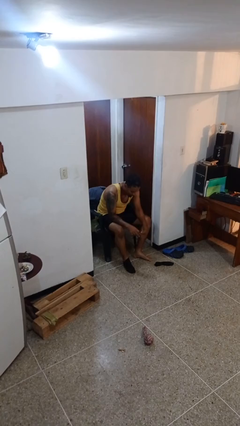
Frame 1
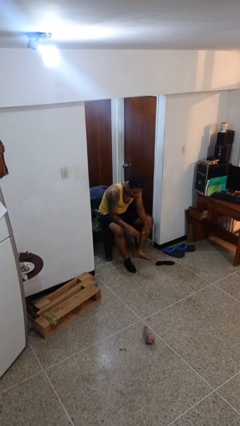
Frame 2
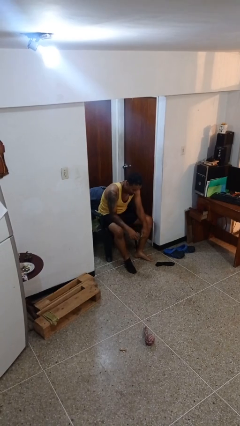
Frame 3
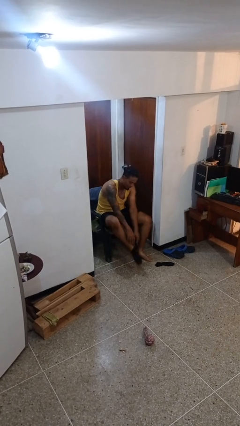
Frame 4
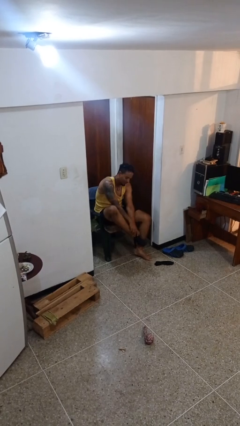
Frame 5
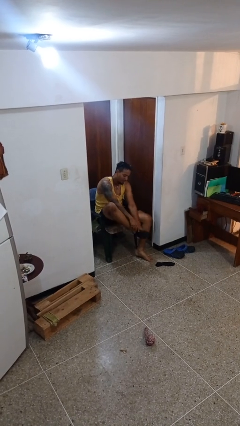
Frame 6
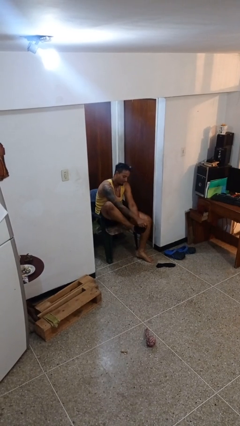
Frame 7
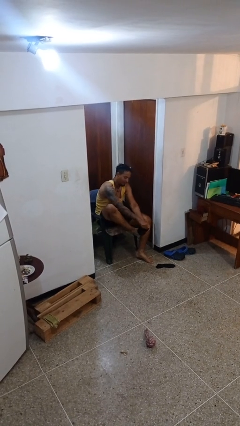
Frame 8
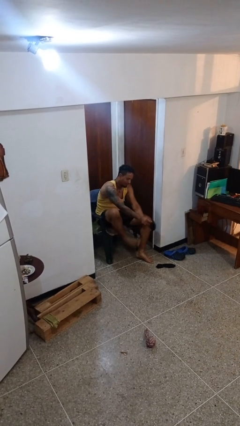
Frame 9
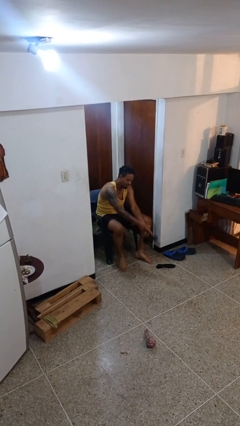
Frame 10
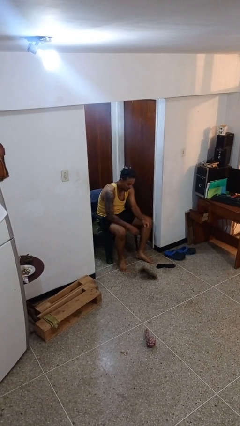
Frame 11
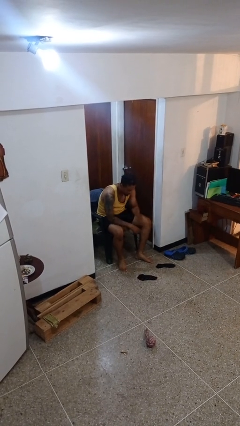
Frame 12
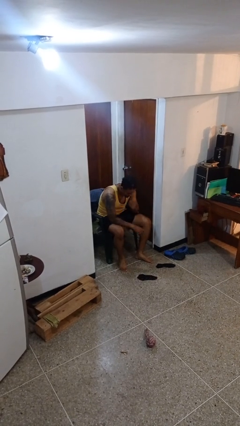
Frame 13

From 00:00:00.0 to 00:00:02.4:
person takes off socks

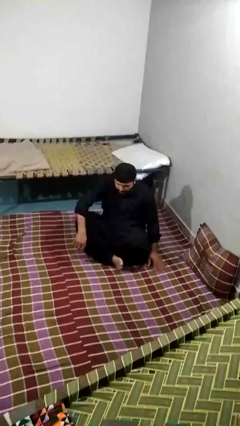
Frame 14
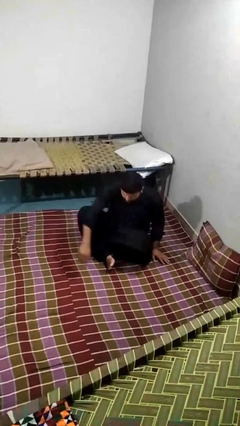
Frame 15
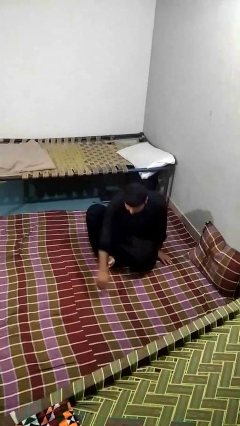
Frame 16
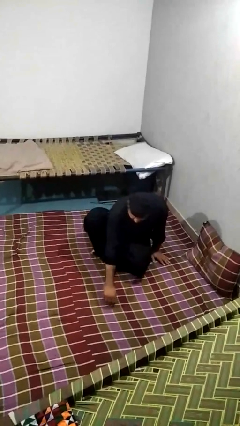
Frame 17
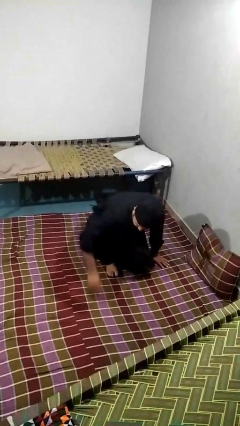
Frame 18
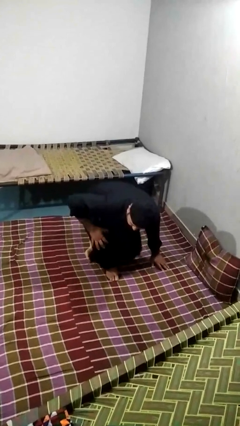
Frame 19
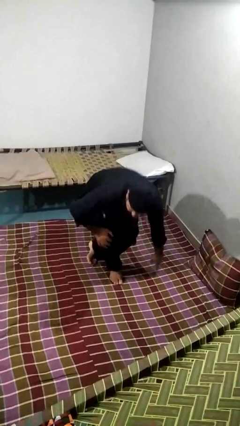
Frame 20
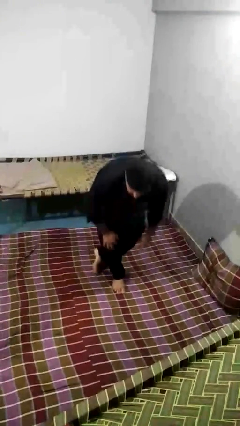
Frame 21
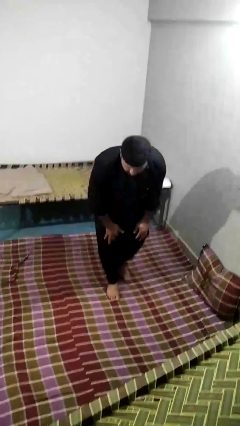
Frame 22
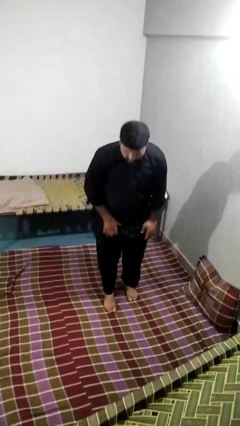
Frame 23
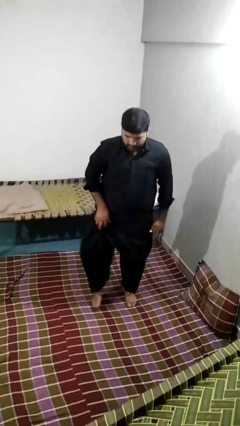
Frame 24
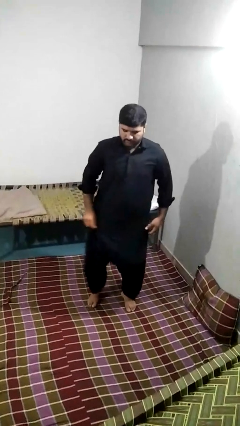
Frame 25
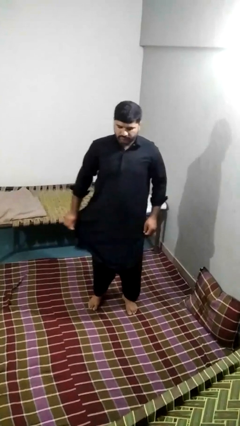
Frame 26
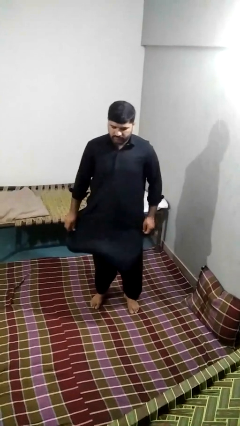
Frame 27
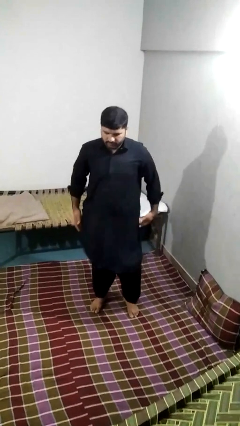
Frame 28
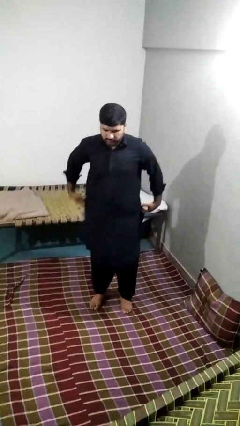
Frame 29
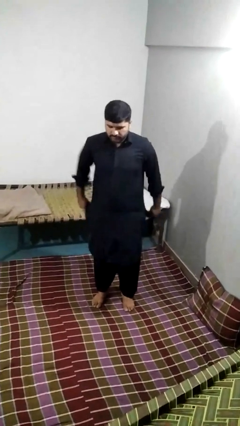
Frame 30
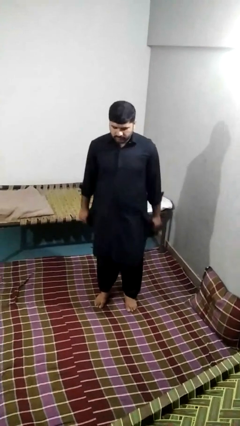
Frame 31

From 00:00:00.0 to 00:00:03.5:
person stands up from floor

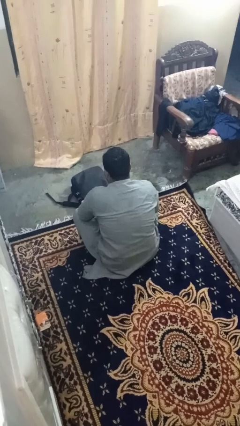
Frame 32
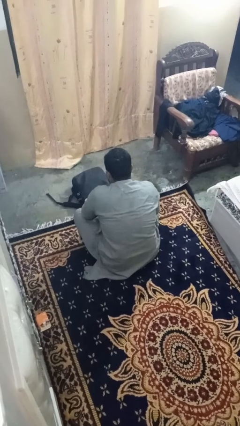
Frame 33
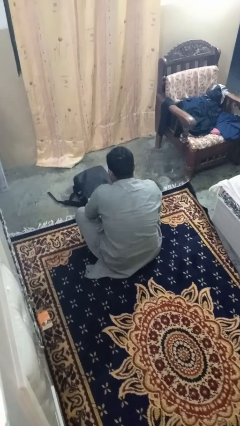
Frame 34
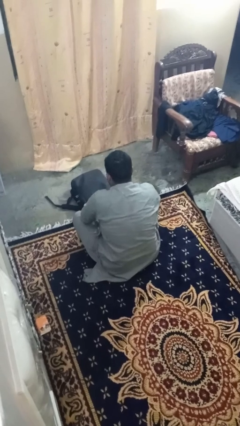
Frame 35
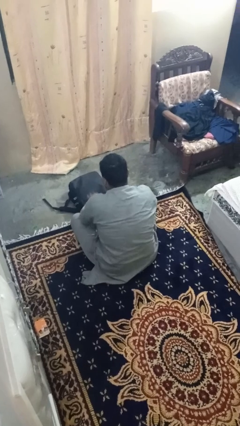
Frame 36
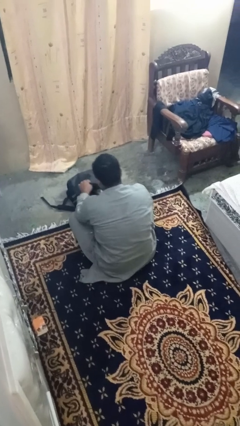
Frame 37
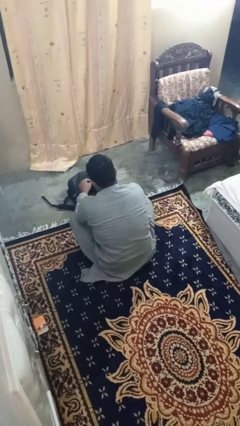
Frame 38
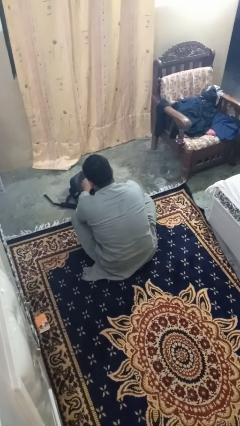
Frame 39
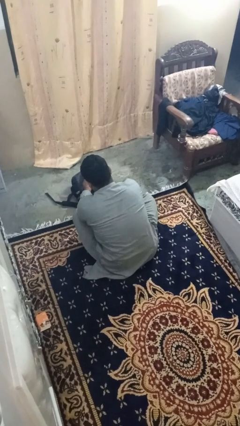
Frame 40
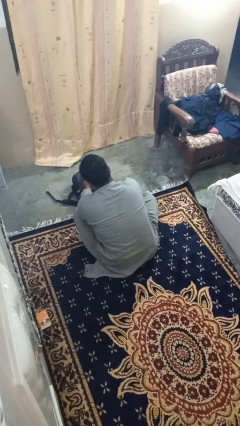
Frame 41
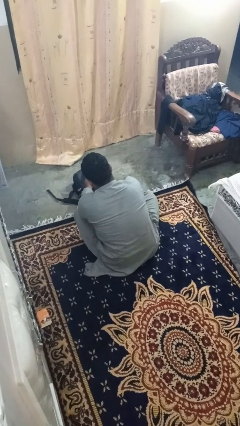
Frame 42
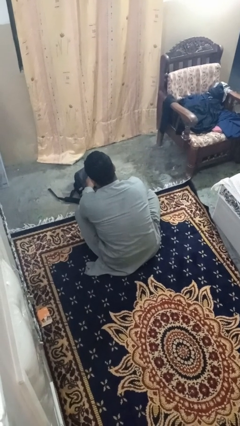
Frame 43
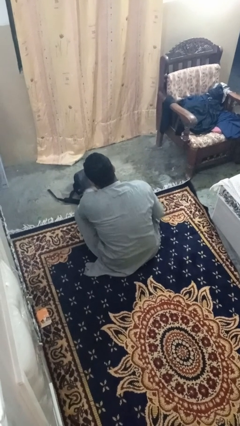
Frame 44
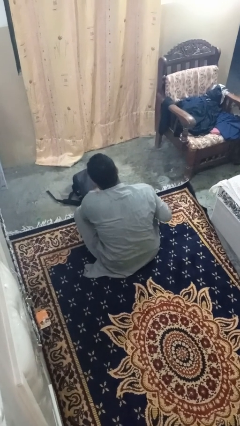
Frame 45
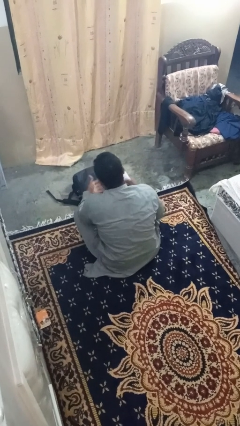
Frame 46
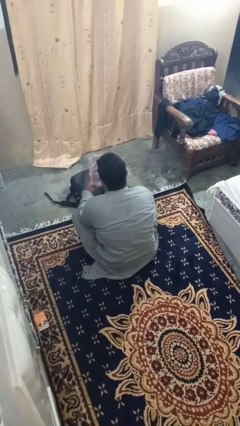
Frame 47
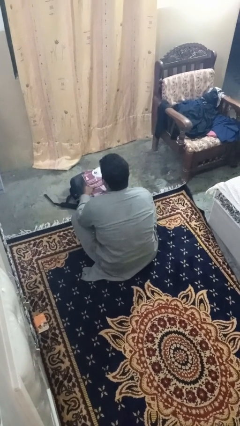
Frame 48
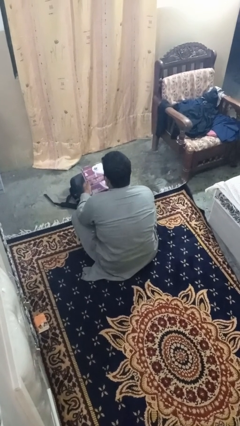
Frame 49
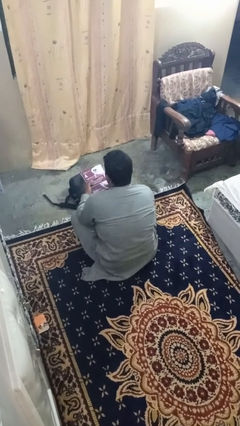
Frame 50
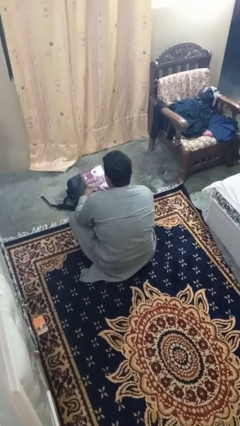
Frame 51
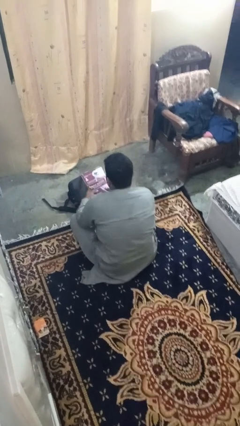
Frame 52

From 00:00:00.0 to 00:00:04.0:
person takes object from bag

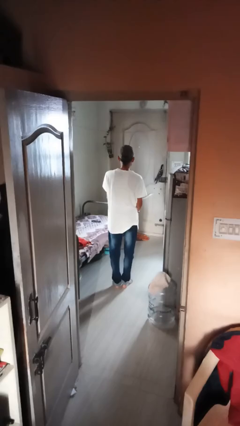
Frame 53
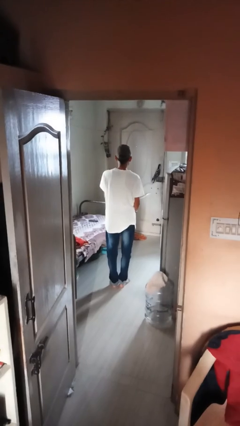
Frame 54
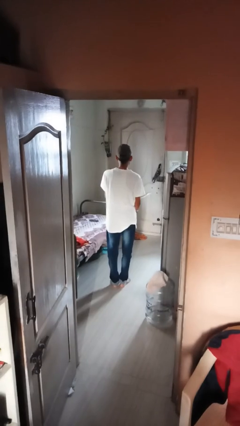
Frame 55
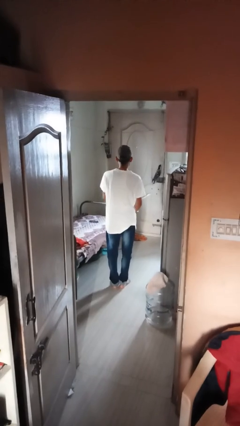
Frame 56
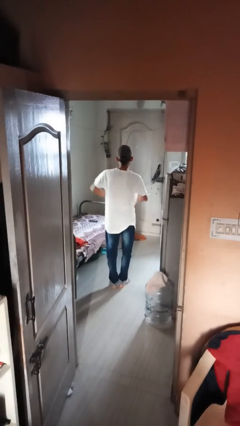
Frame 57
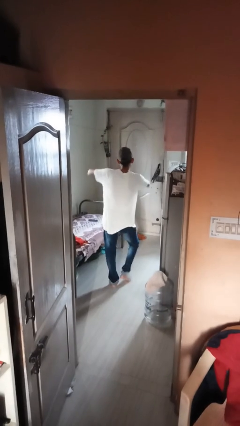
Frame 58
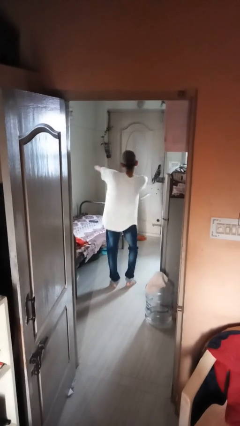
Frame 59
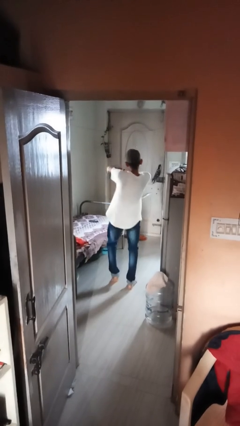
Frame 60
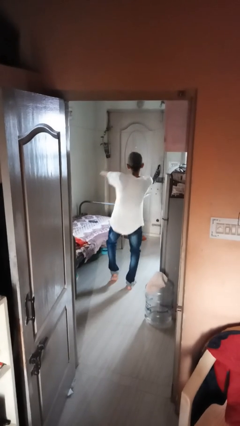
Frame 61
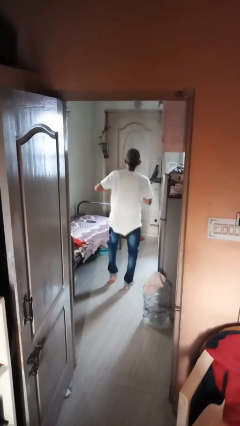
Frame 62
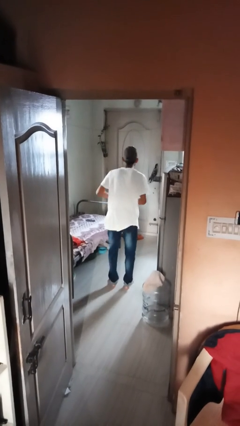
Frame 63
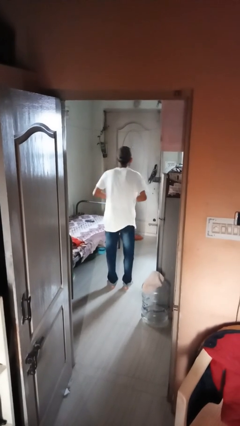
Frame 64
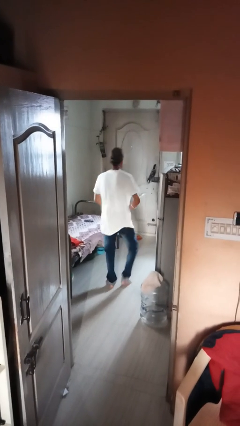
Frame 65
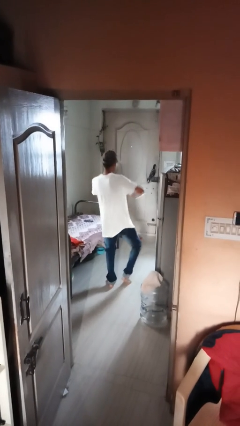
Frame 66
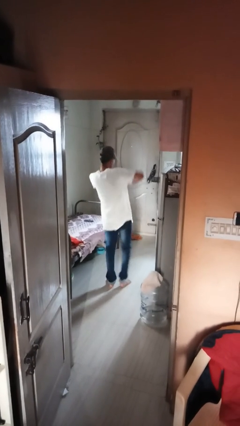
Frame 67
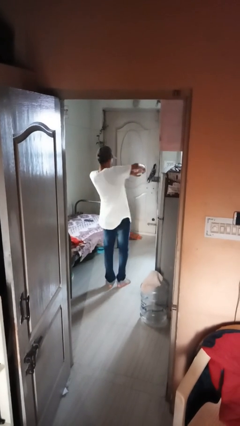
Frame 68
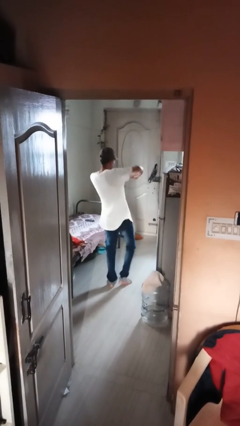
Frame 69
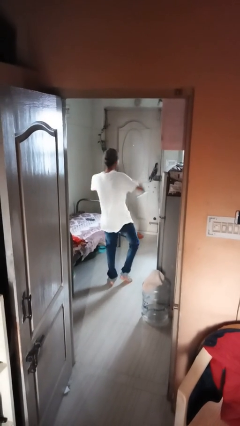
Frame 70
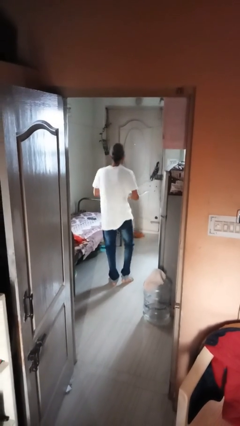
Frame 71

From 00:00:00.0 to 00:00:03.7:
person dances in place

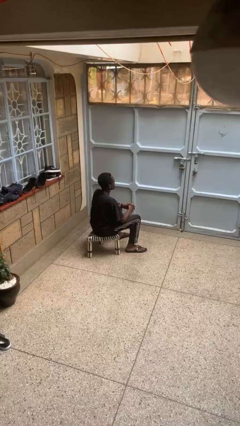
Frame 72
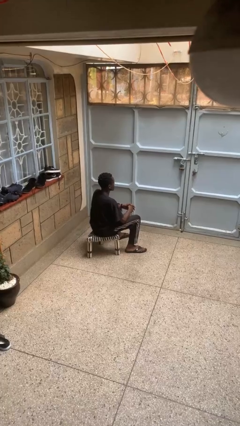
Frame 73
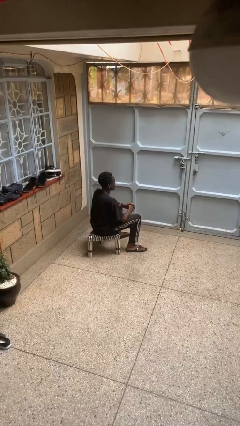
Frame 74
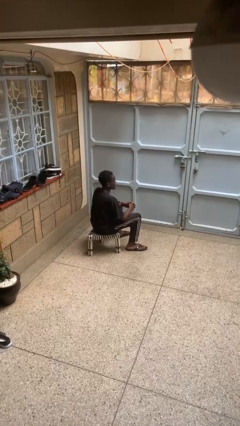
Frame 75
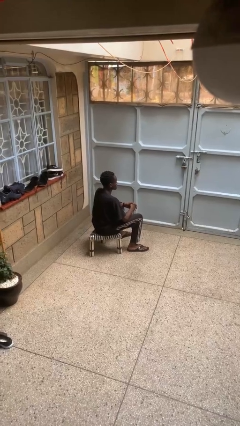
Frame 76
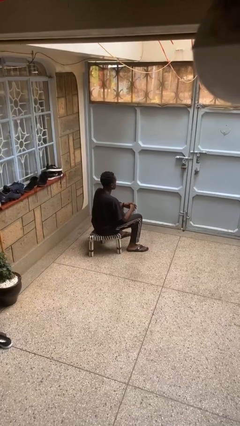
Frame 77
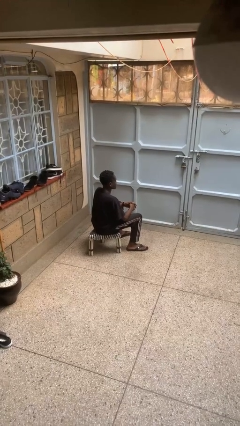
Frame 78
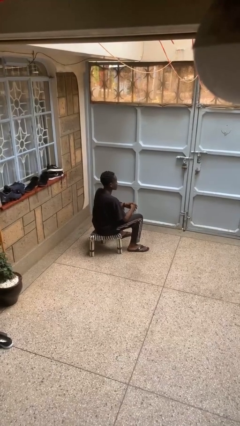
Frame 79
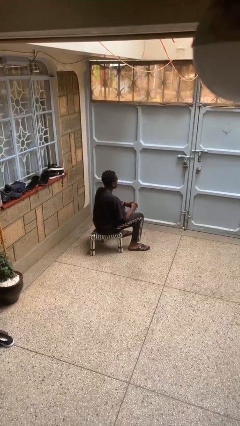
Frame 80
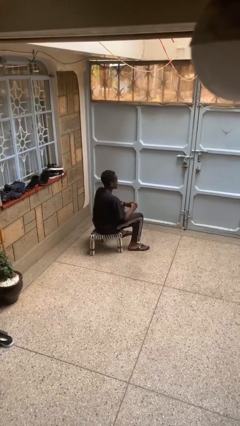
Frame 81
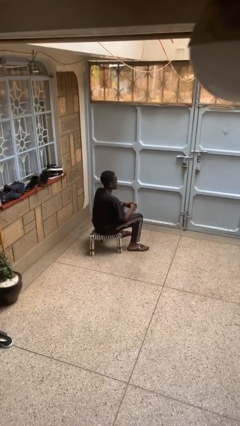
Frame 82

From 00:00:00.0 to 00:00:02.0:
person shakes head

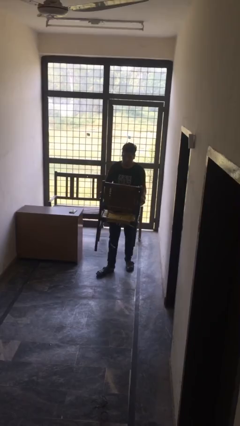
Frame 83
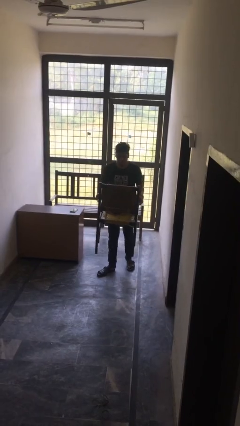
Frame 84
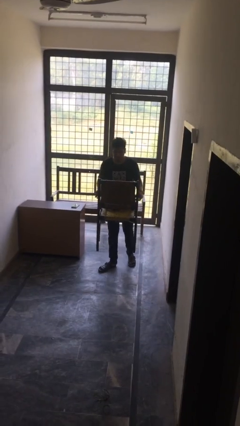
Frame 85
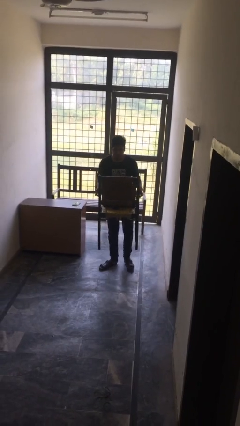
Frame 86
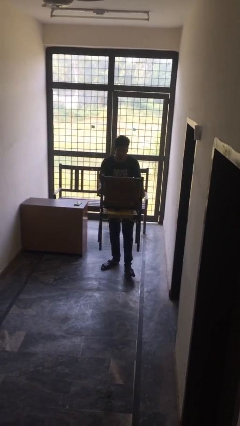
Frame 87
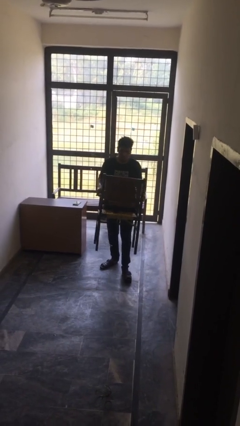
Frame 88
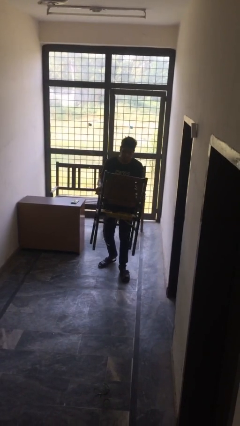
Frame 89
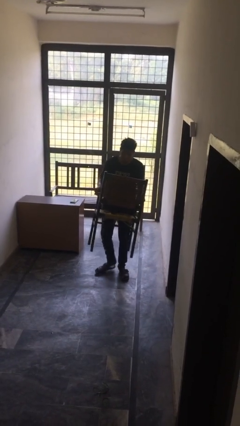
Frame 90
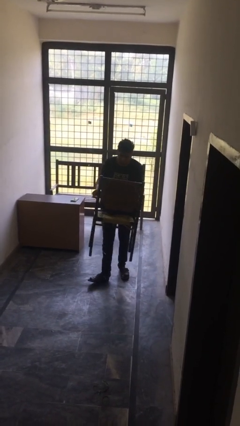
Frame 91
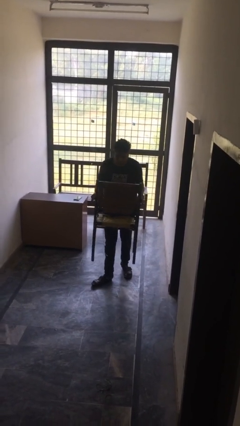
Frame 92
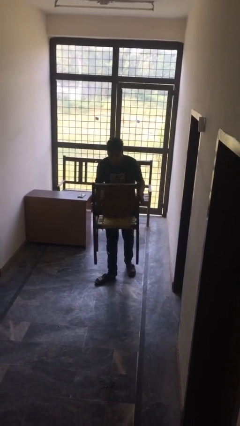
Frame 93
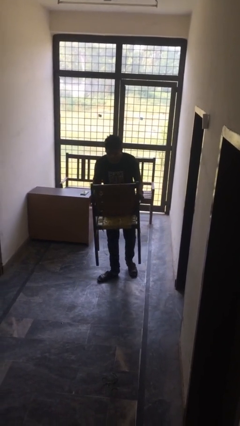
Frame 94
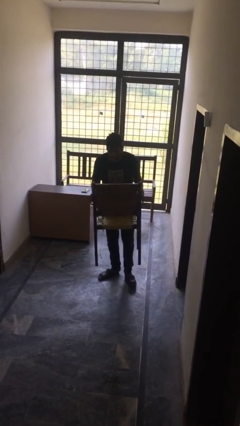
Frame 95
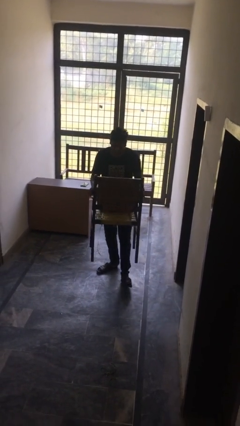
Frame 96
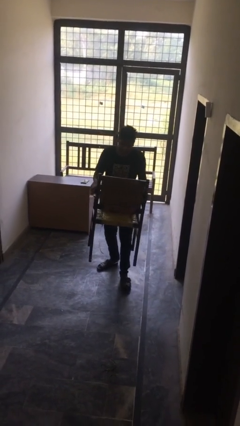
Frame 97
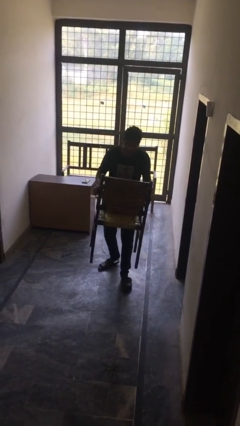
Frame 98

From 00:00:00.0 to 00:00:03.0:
person reads document
